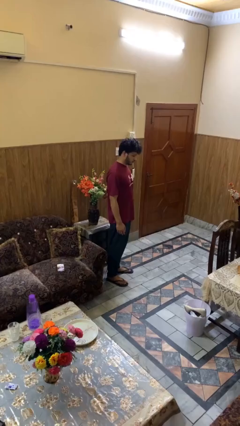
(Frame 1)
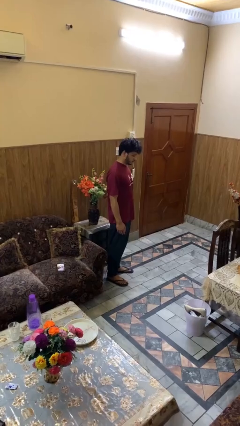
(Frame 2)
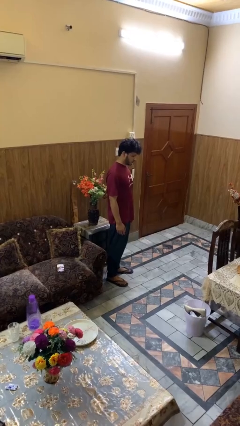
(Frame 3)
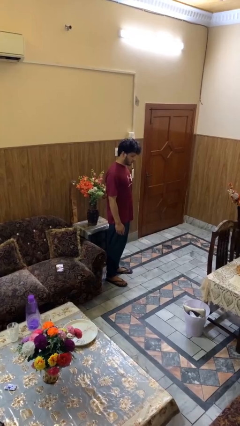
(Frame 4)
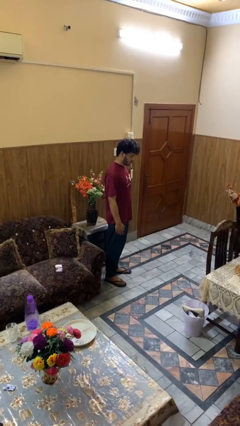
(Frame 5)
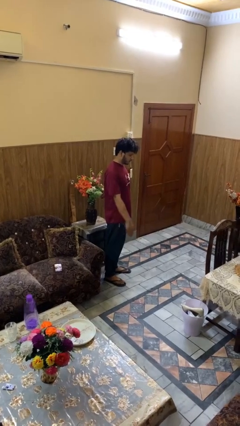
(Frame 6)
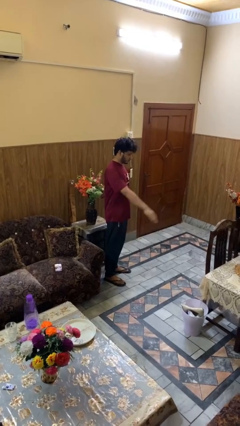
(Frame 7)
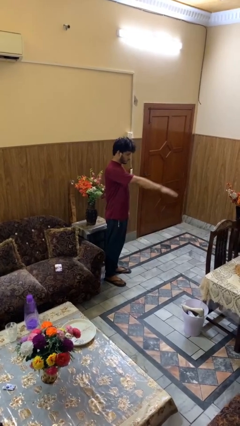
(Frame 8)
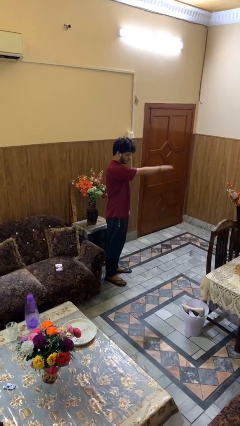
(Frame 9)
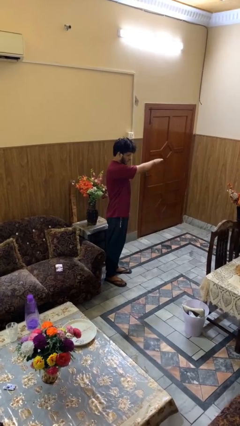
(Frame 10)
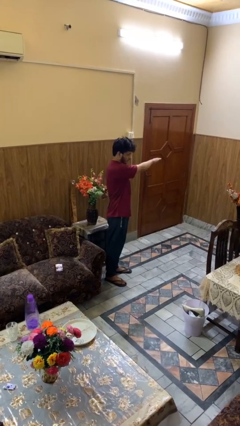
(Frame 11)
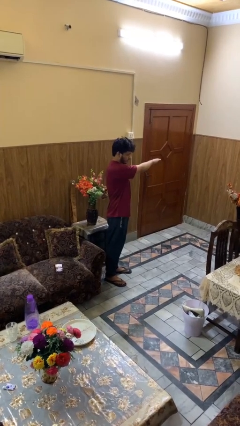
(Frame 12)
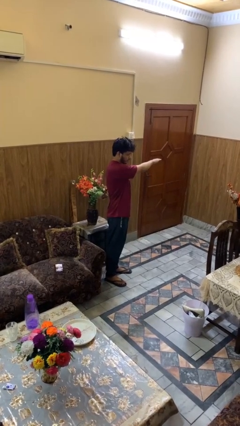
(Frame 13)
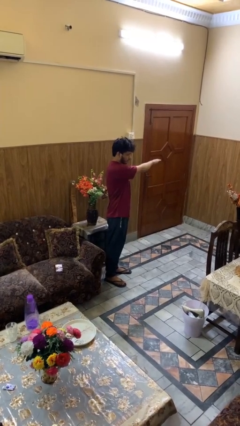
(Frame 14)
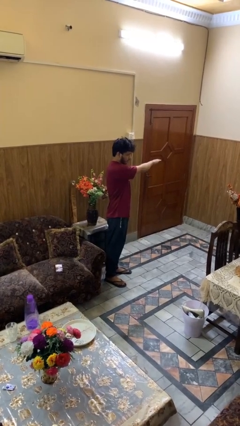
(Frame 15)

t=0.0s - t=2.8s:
person gestures swipe left

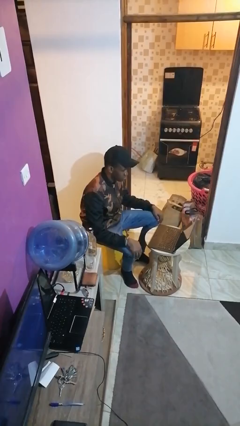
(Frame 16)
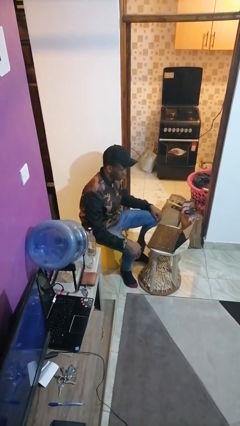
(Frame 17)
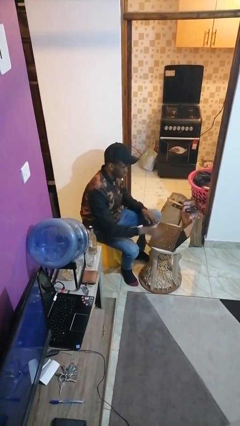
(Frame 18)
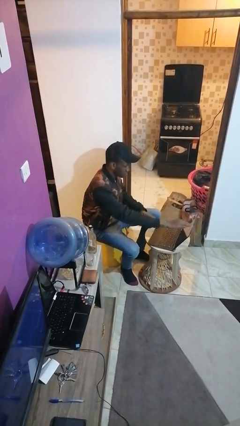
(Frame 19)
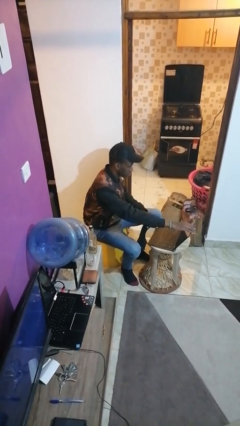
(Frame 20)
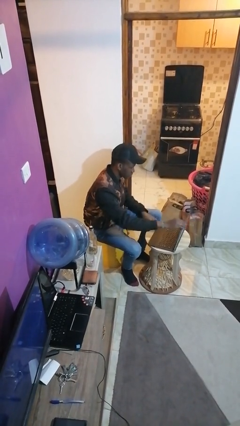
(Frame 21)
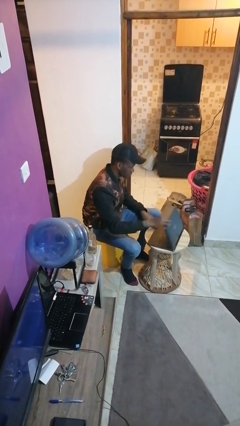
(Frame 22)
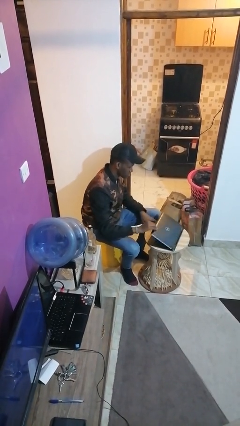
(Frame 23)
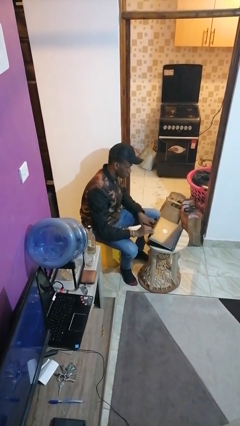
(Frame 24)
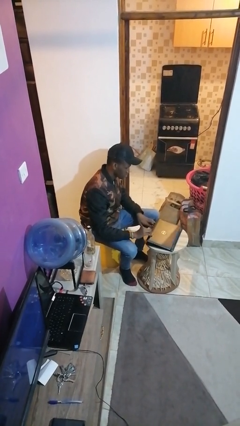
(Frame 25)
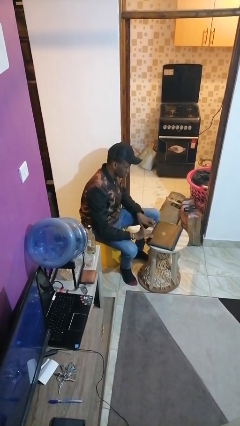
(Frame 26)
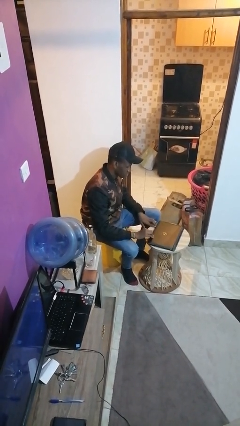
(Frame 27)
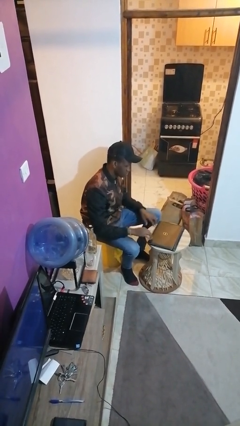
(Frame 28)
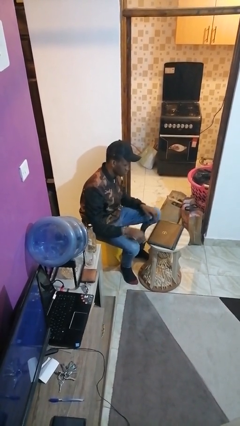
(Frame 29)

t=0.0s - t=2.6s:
person closes laptop

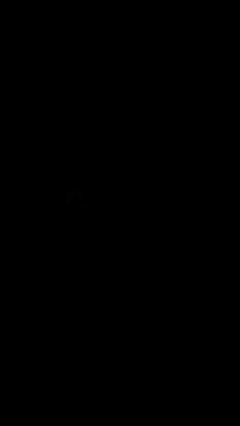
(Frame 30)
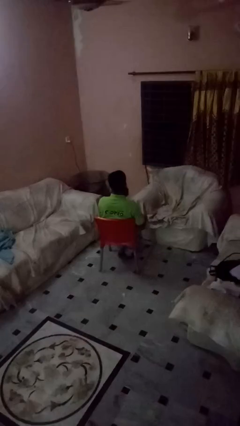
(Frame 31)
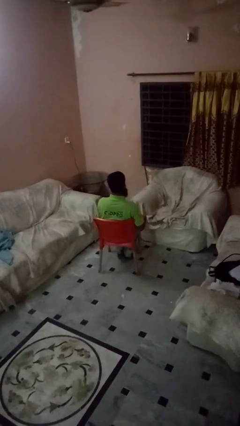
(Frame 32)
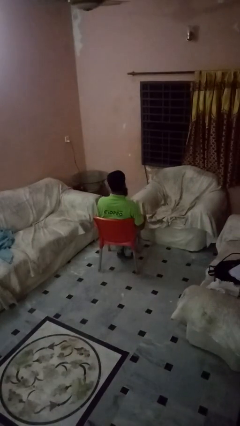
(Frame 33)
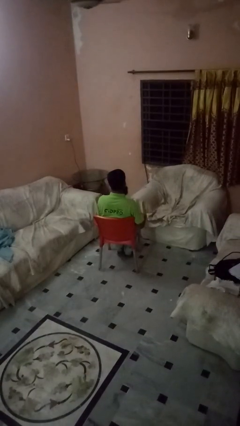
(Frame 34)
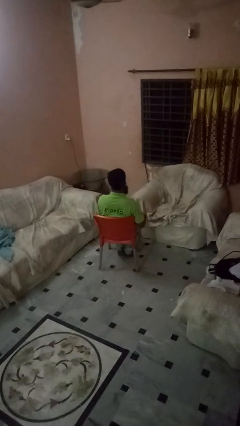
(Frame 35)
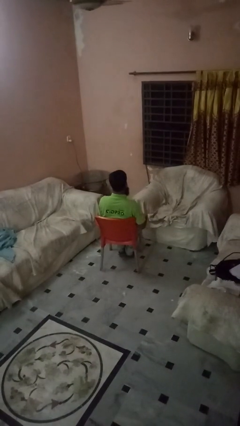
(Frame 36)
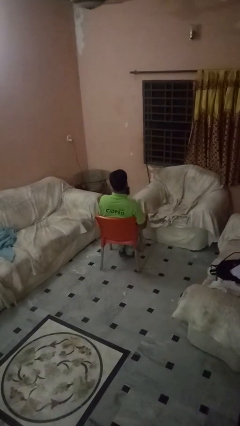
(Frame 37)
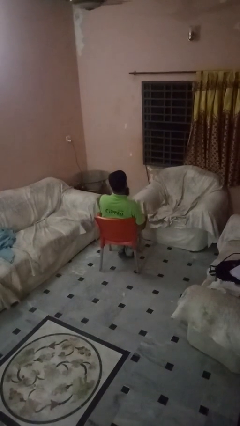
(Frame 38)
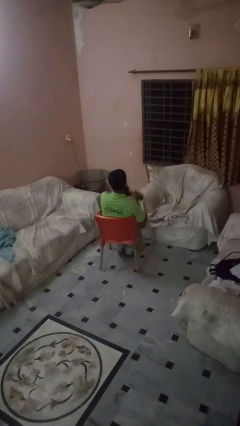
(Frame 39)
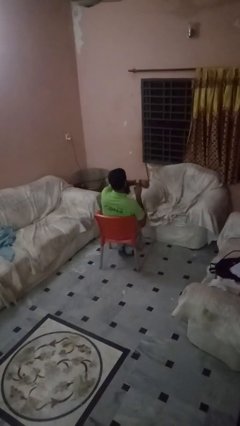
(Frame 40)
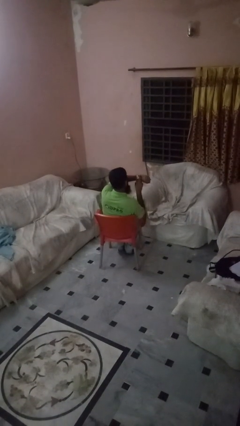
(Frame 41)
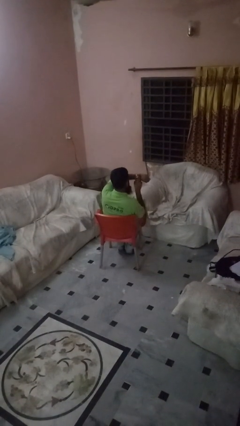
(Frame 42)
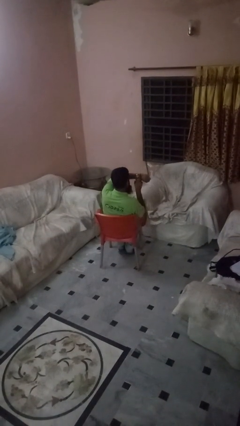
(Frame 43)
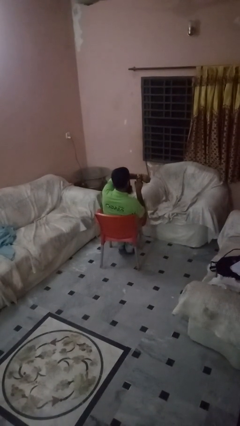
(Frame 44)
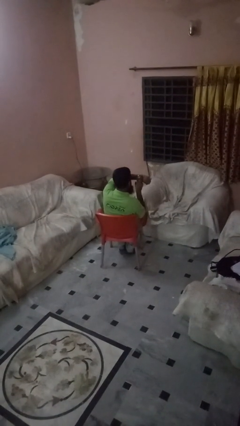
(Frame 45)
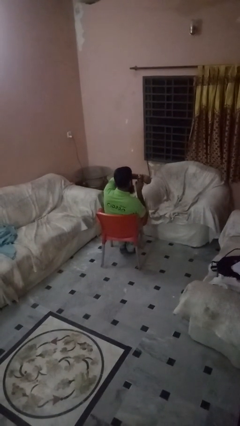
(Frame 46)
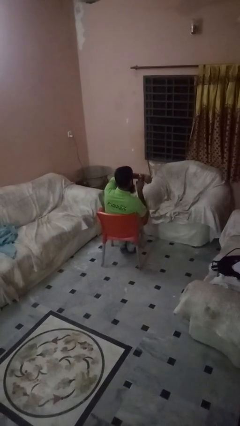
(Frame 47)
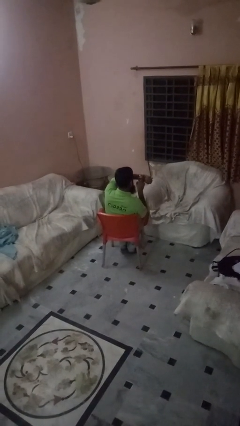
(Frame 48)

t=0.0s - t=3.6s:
person gestures watch closely

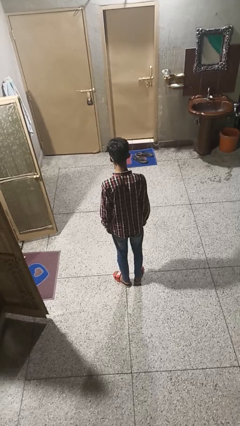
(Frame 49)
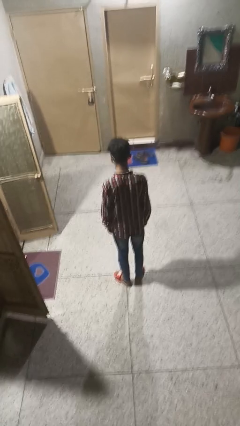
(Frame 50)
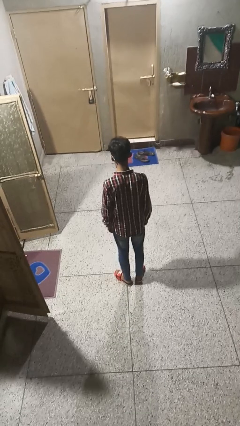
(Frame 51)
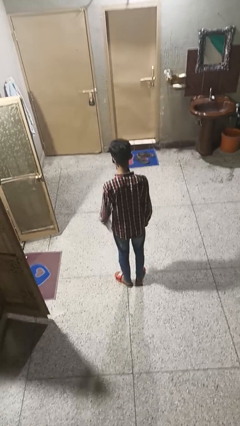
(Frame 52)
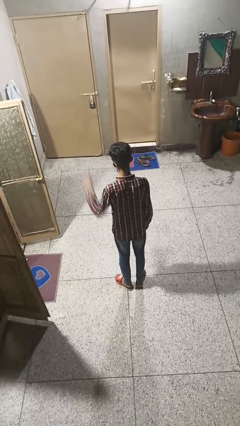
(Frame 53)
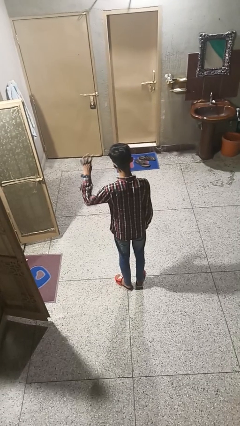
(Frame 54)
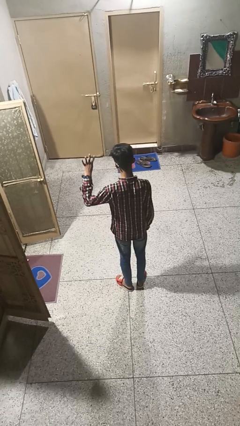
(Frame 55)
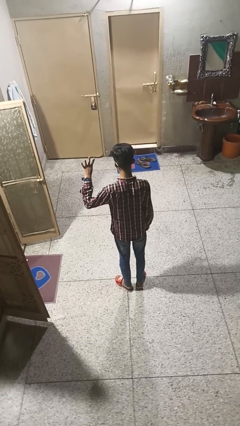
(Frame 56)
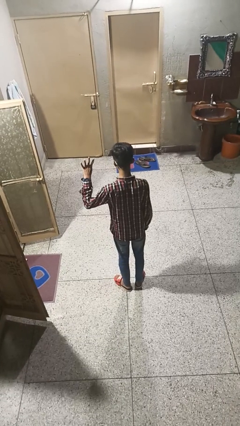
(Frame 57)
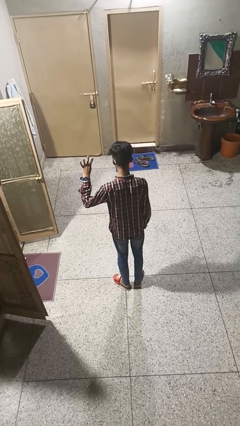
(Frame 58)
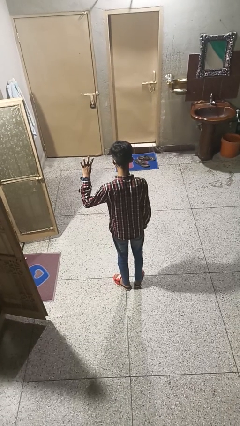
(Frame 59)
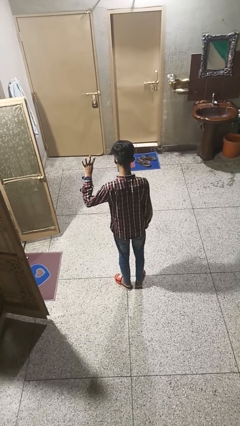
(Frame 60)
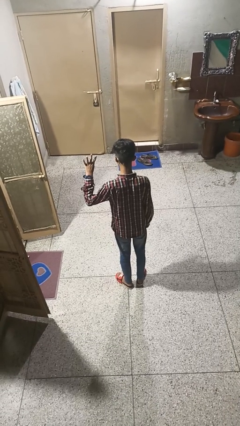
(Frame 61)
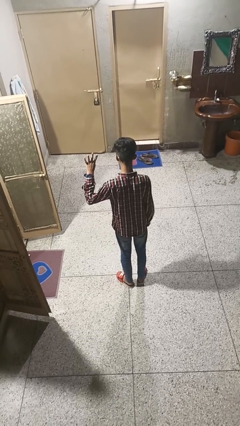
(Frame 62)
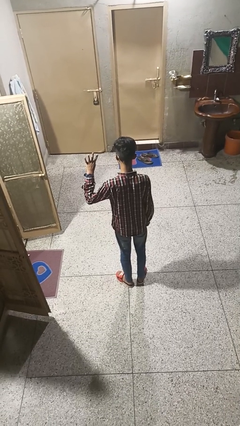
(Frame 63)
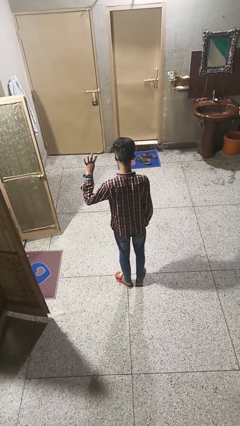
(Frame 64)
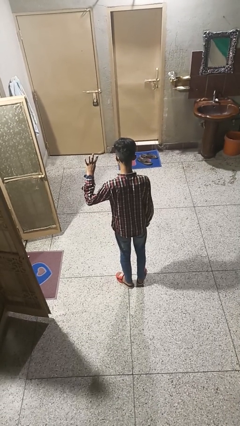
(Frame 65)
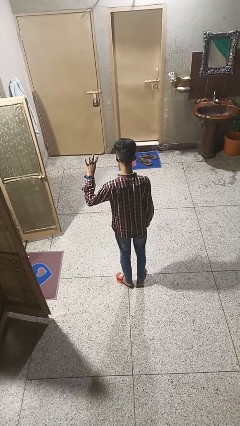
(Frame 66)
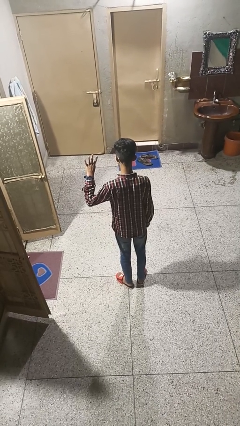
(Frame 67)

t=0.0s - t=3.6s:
person gestures number four

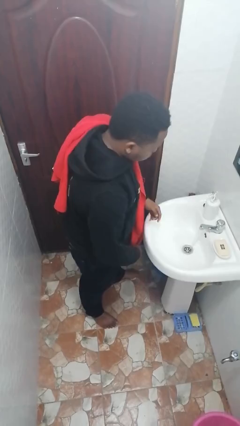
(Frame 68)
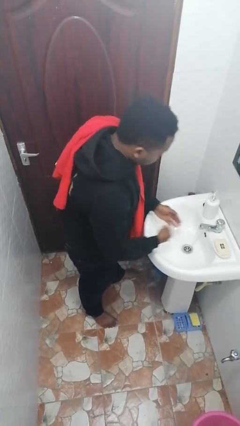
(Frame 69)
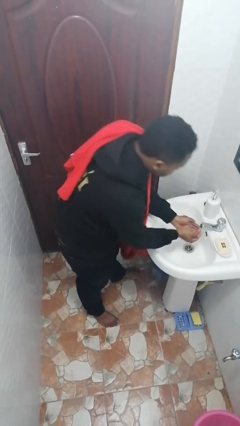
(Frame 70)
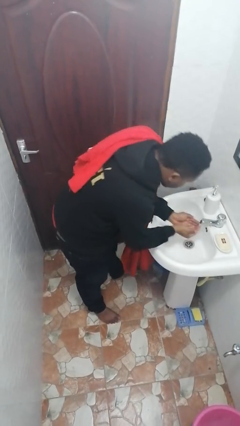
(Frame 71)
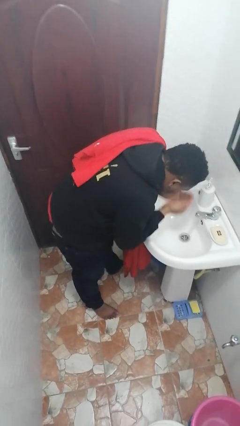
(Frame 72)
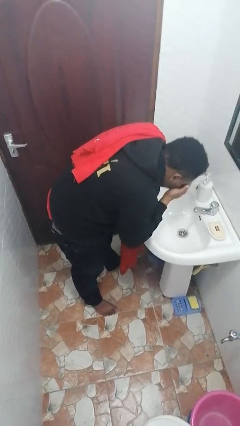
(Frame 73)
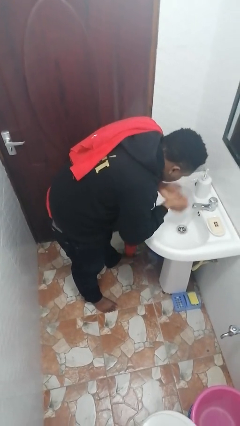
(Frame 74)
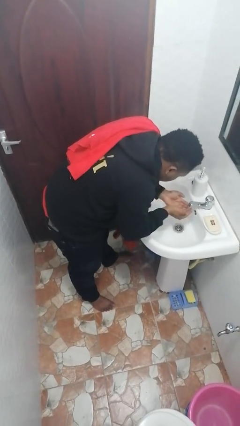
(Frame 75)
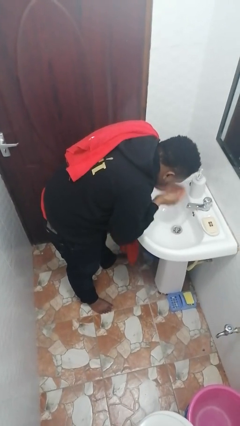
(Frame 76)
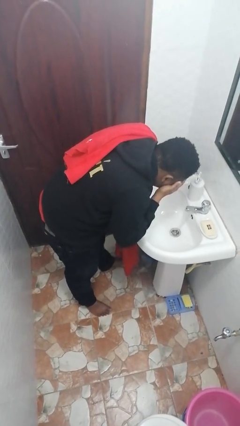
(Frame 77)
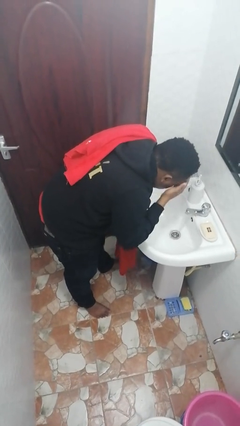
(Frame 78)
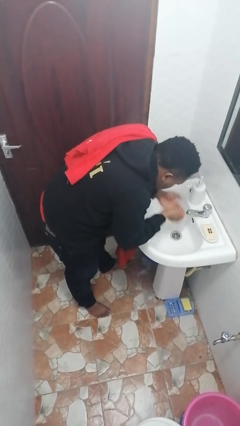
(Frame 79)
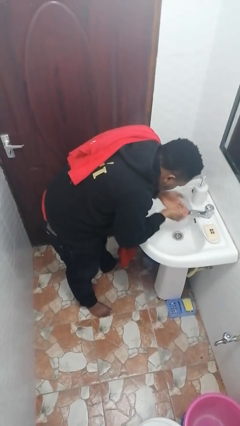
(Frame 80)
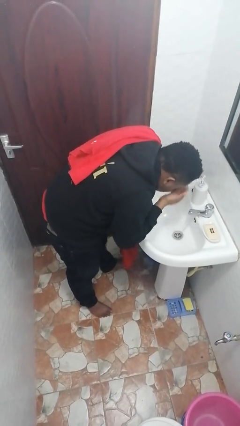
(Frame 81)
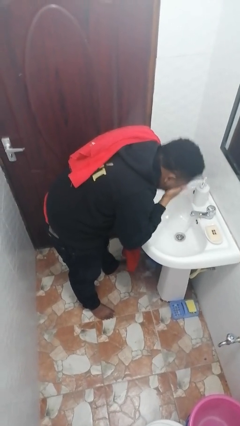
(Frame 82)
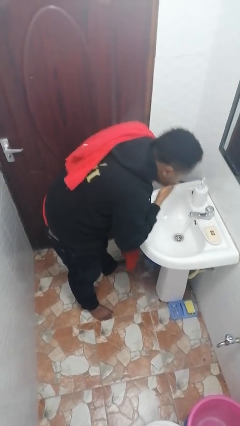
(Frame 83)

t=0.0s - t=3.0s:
person washes face

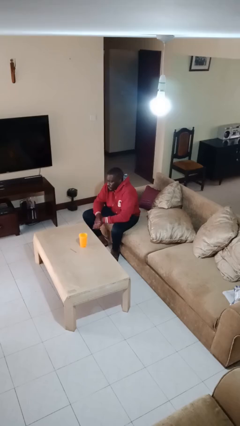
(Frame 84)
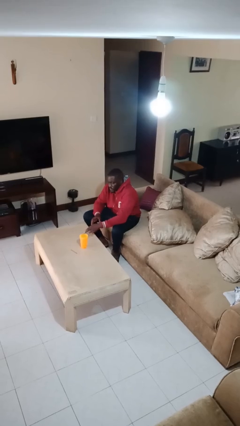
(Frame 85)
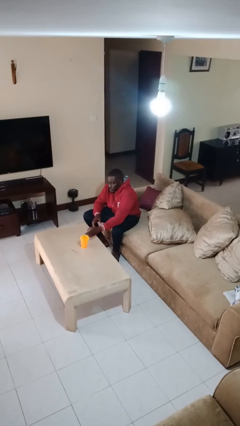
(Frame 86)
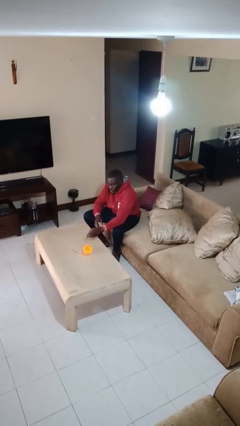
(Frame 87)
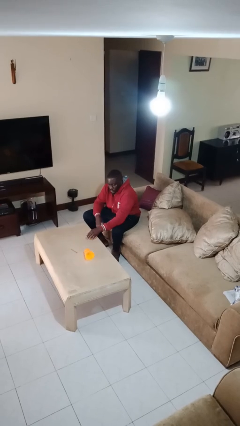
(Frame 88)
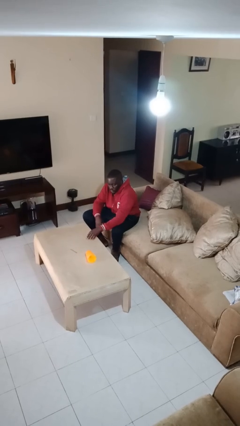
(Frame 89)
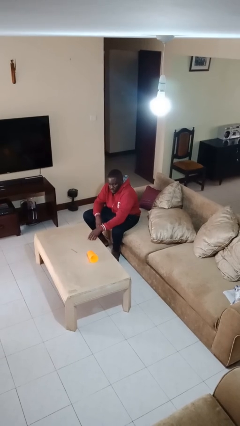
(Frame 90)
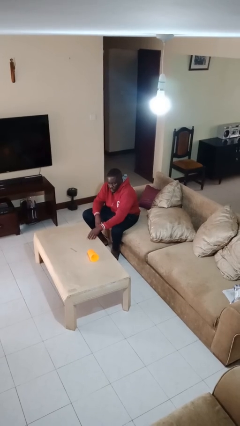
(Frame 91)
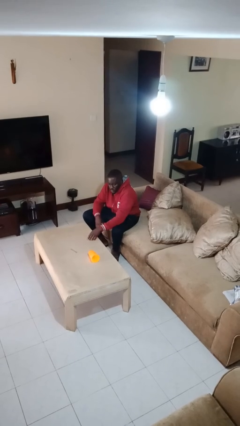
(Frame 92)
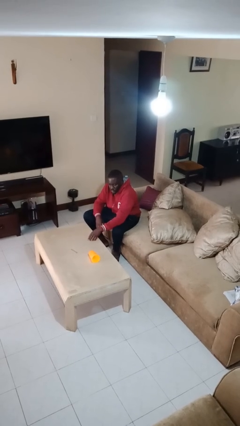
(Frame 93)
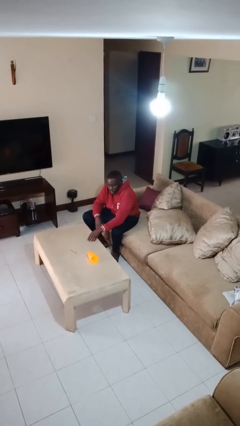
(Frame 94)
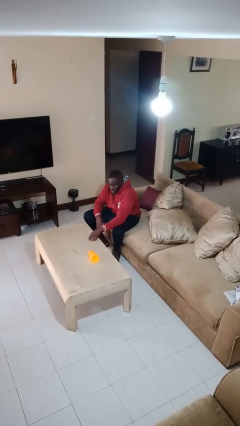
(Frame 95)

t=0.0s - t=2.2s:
person knocks over glass
